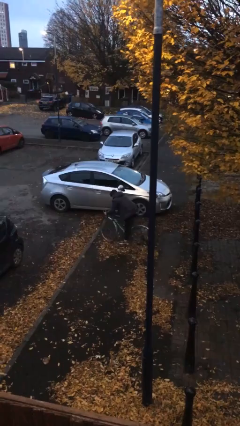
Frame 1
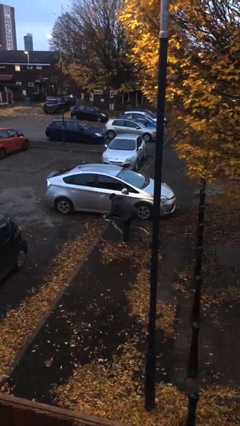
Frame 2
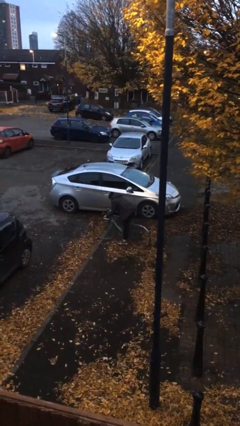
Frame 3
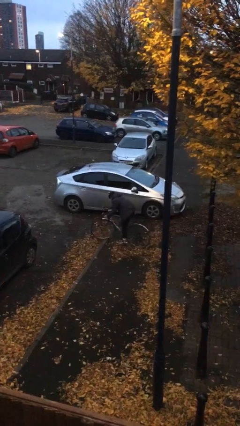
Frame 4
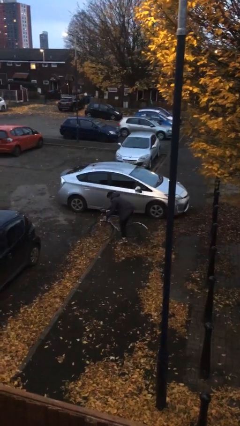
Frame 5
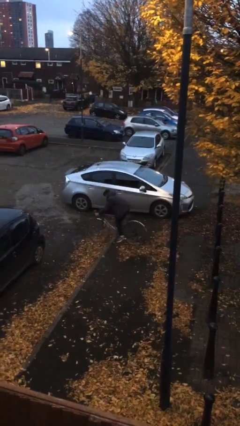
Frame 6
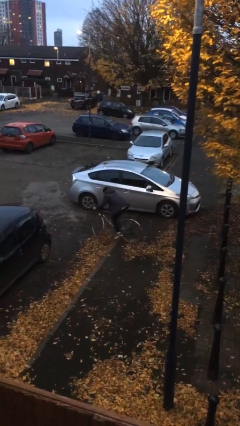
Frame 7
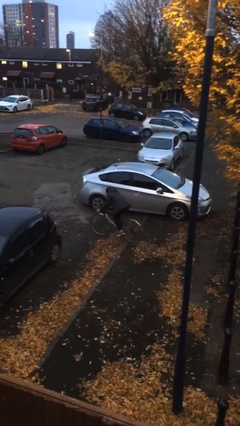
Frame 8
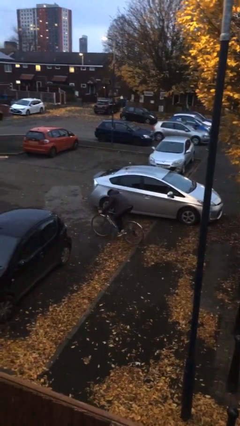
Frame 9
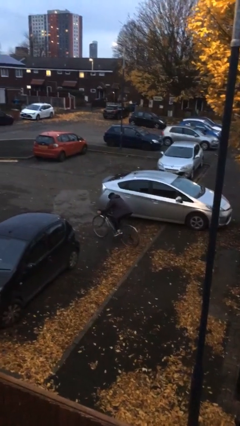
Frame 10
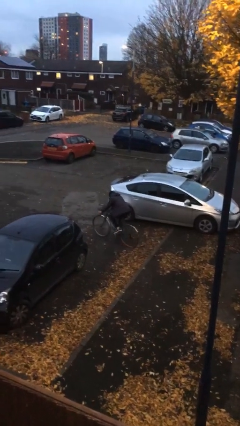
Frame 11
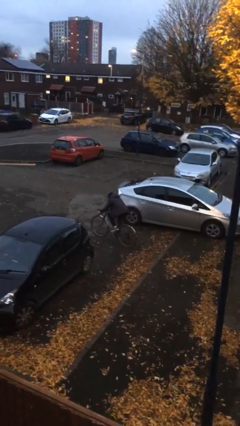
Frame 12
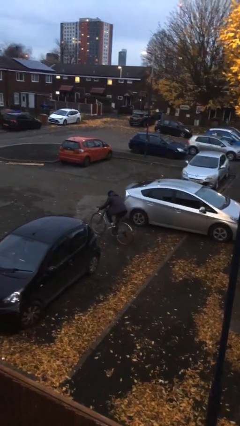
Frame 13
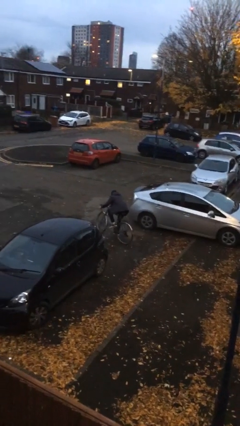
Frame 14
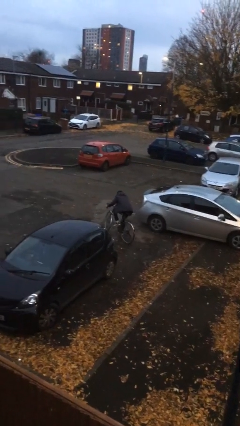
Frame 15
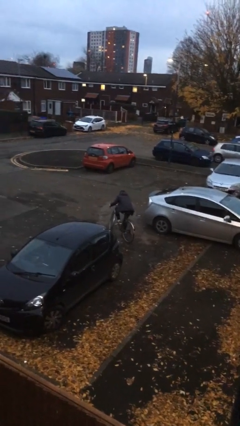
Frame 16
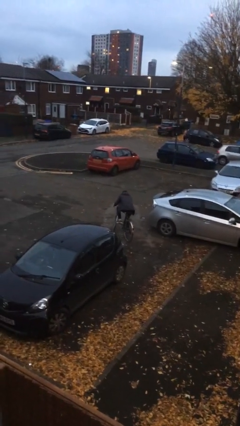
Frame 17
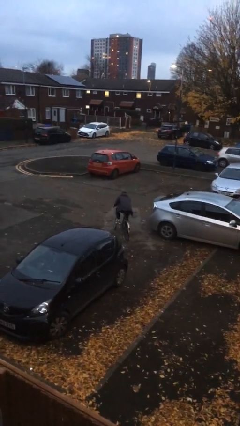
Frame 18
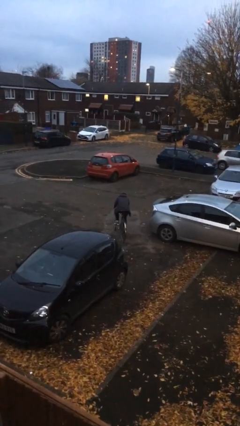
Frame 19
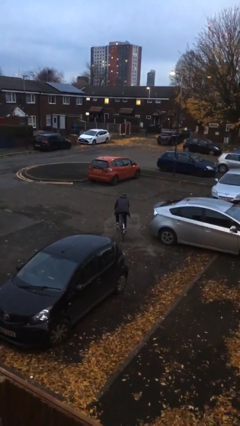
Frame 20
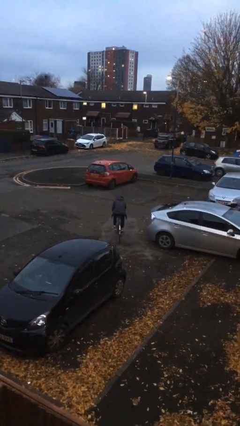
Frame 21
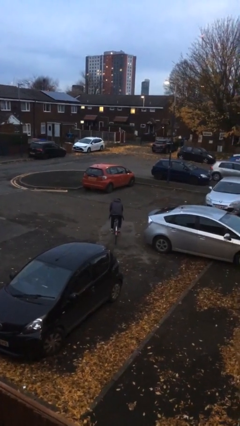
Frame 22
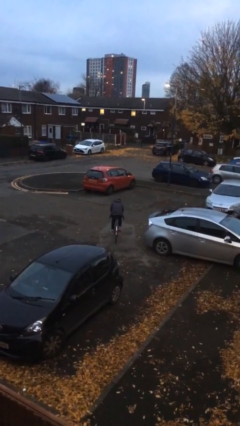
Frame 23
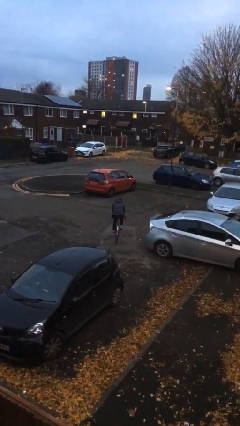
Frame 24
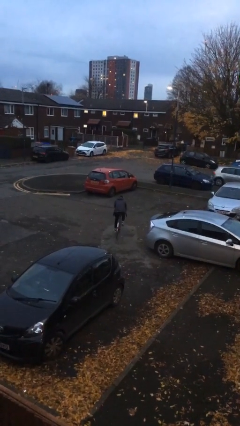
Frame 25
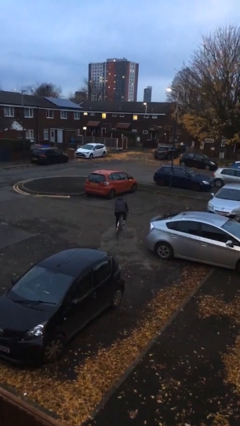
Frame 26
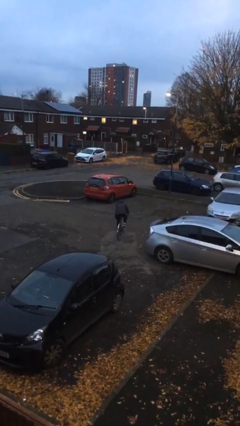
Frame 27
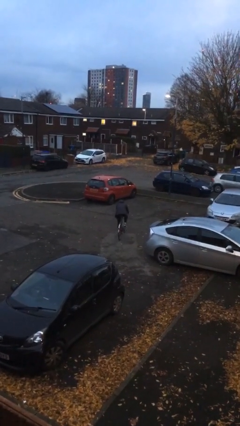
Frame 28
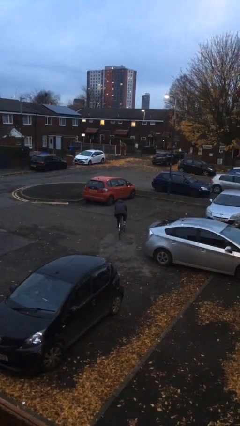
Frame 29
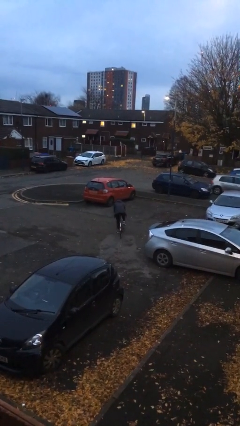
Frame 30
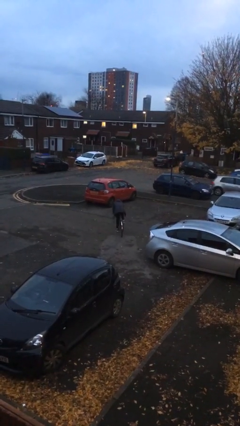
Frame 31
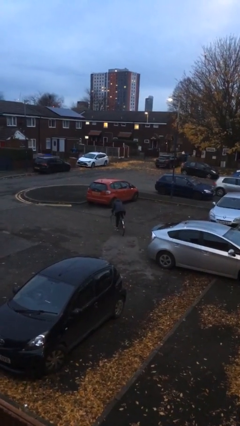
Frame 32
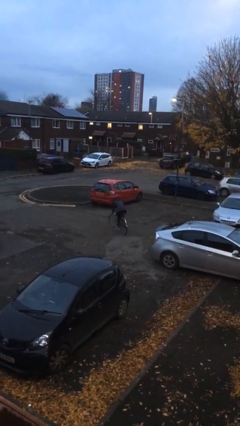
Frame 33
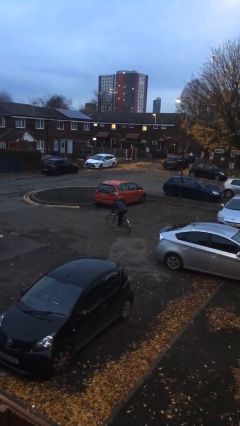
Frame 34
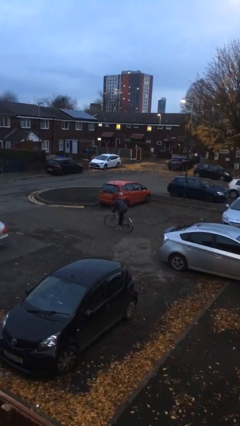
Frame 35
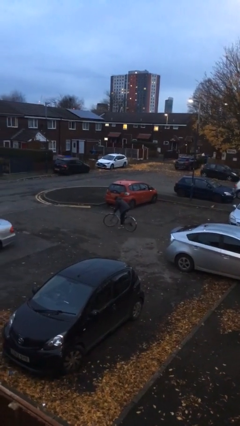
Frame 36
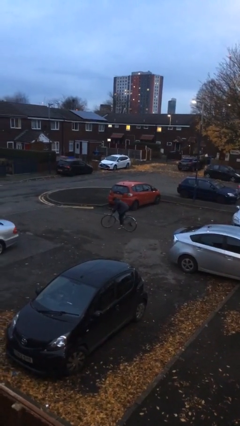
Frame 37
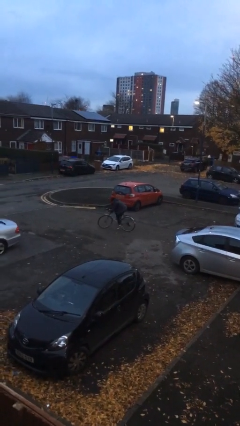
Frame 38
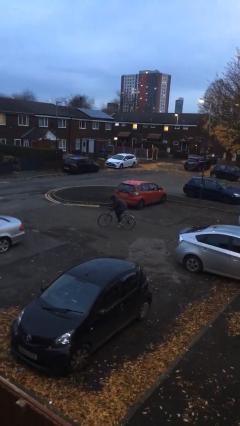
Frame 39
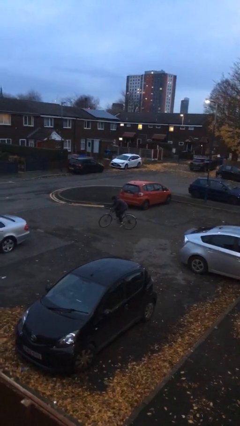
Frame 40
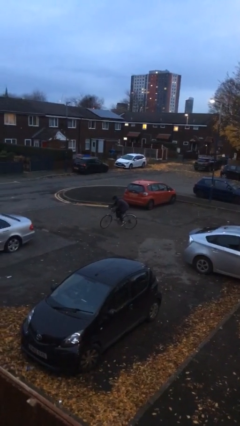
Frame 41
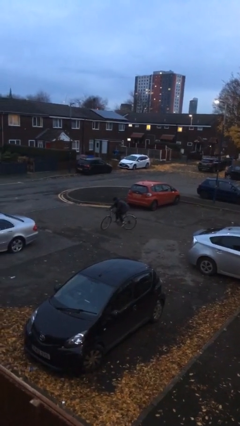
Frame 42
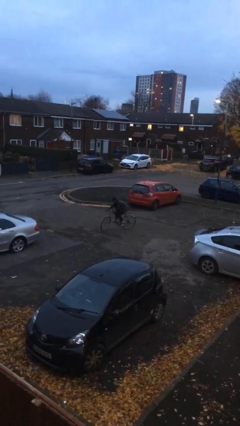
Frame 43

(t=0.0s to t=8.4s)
person rides bicycle

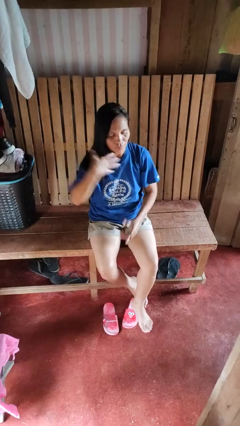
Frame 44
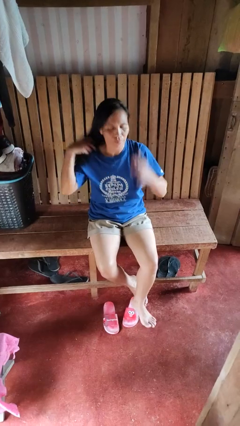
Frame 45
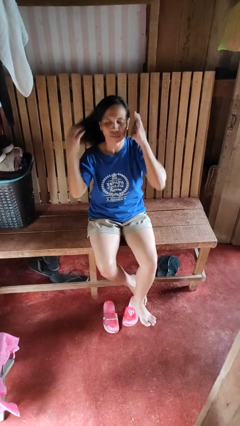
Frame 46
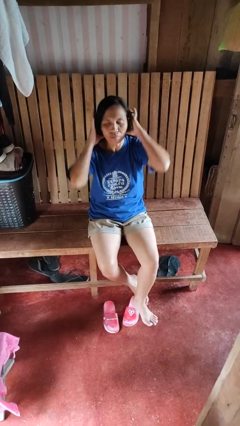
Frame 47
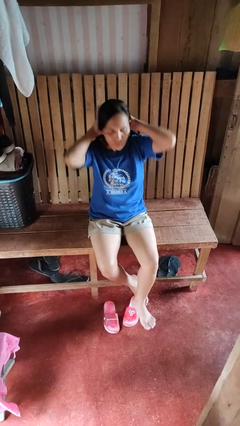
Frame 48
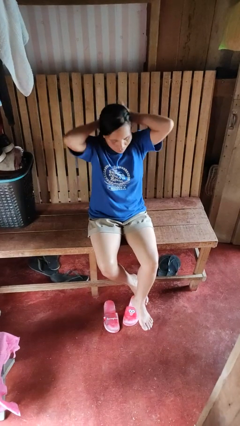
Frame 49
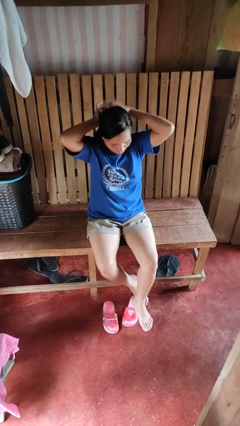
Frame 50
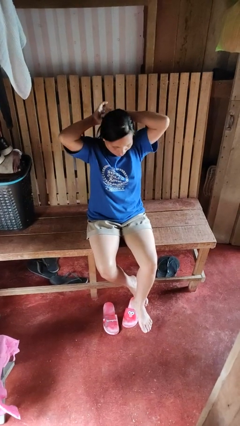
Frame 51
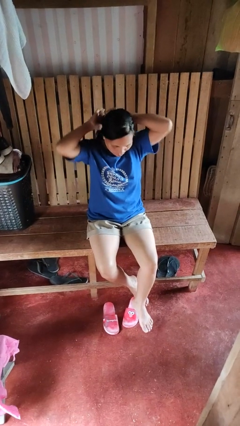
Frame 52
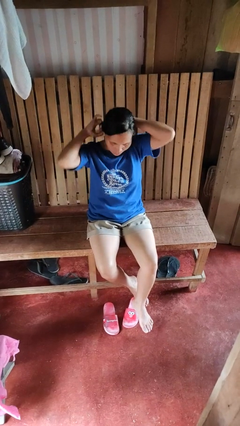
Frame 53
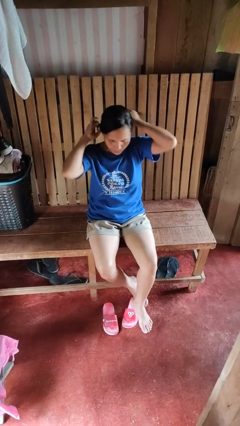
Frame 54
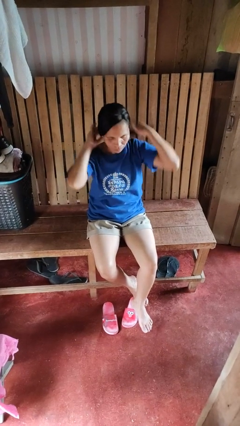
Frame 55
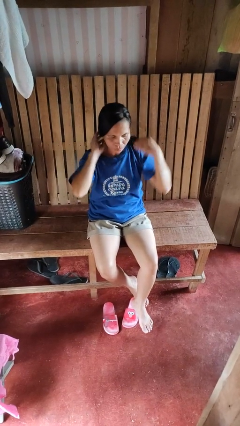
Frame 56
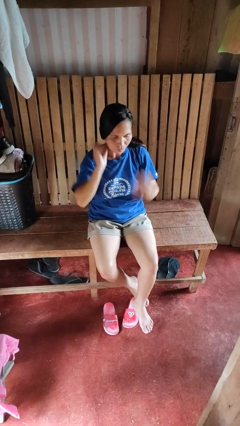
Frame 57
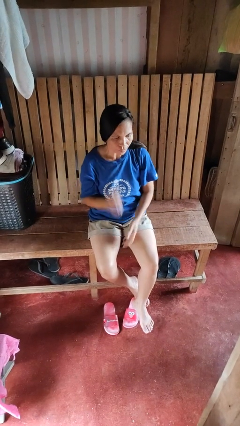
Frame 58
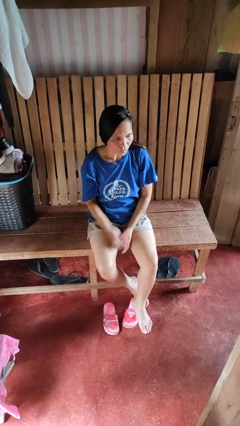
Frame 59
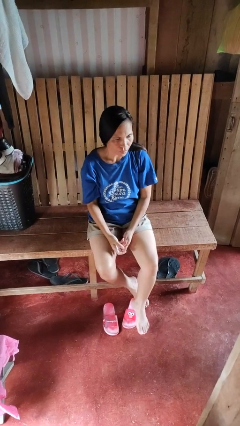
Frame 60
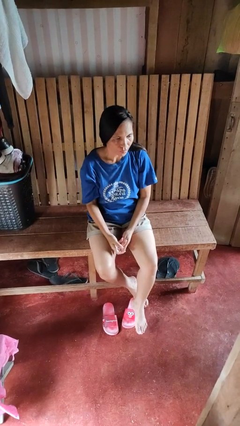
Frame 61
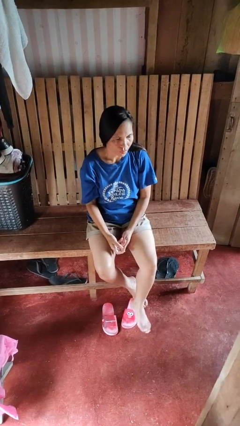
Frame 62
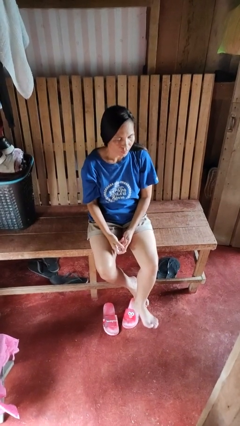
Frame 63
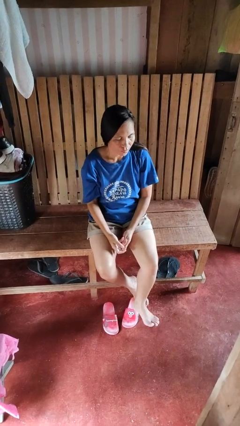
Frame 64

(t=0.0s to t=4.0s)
person puts hair in ponytail

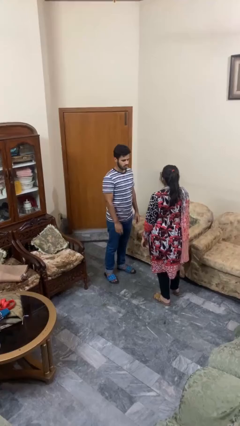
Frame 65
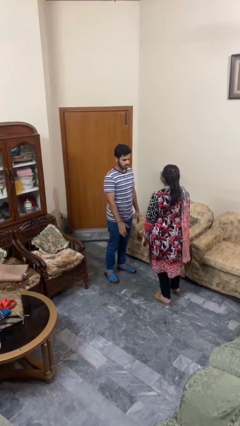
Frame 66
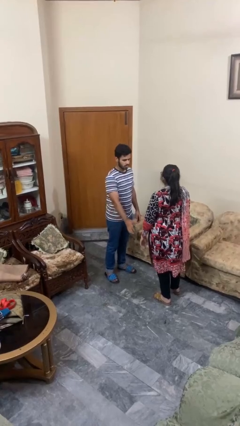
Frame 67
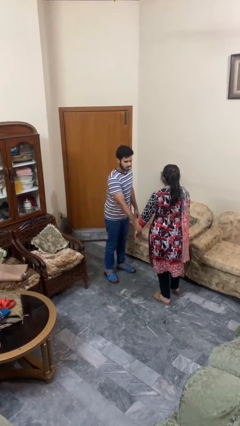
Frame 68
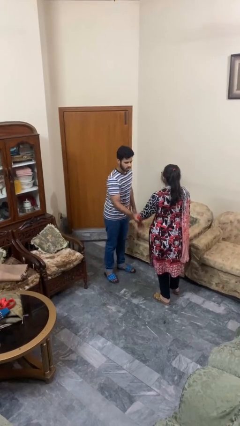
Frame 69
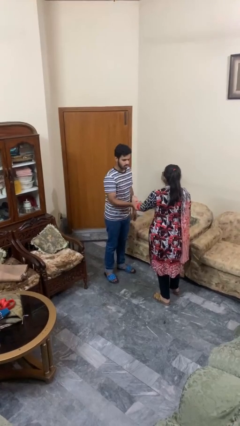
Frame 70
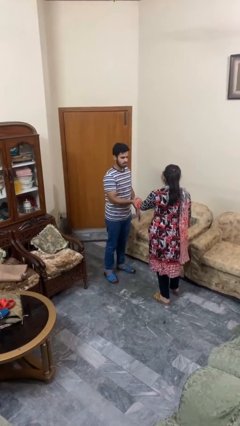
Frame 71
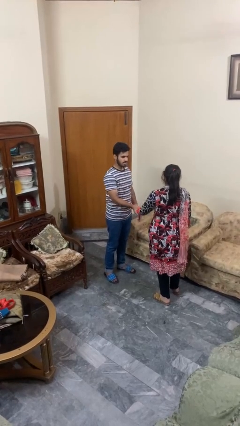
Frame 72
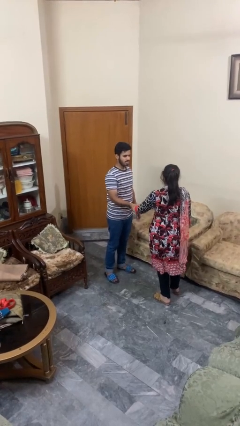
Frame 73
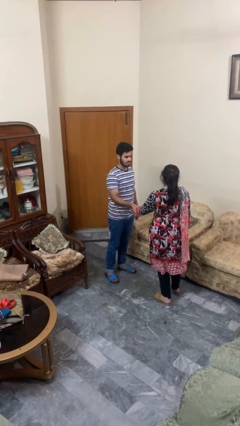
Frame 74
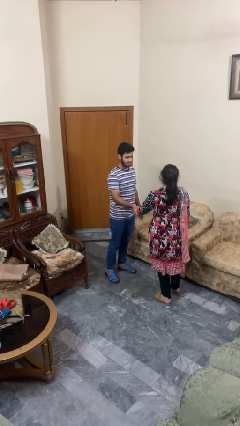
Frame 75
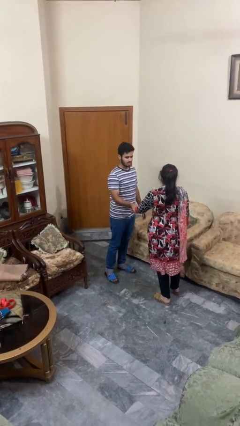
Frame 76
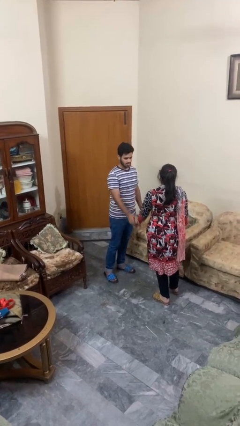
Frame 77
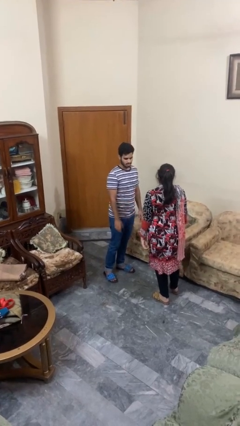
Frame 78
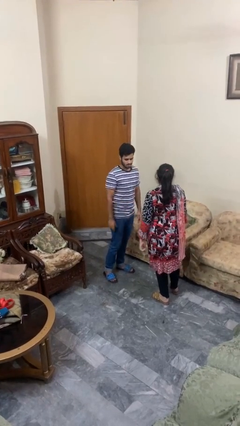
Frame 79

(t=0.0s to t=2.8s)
person grabs person by forearm

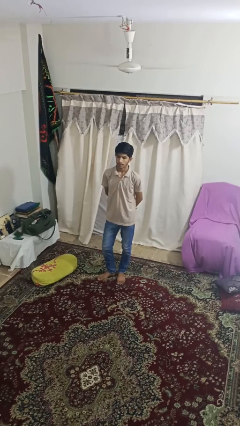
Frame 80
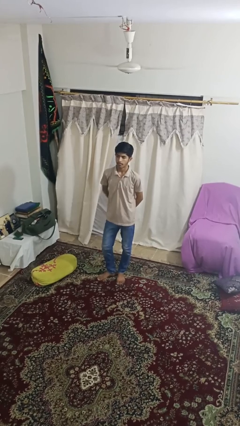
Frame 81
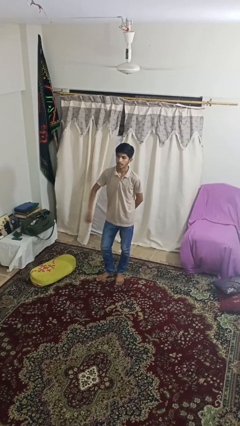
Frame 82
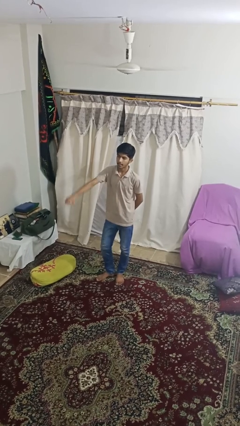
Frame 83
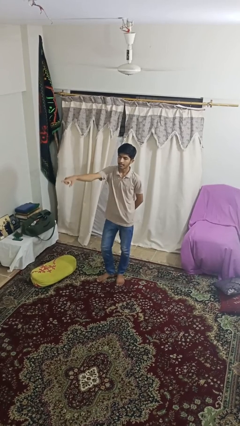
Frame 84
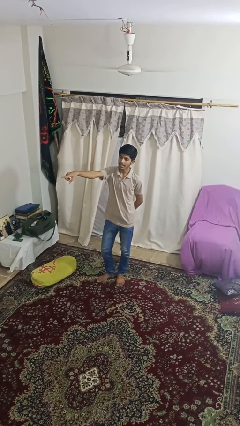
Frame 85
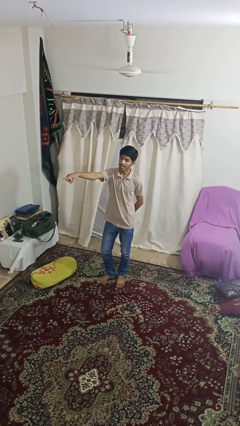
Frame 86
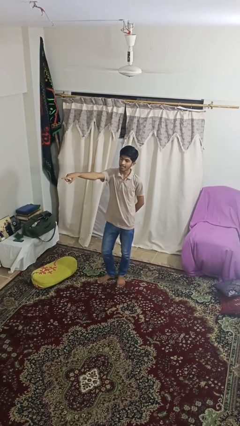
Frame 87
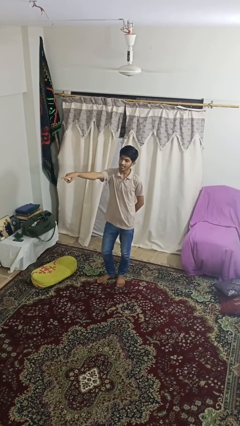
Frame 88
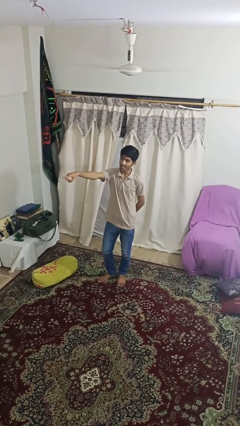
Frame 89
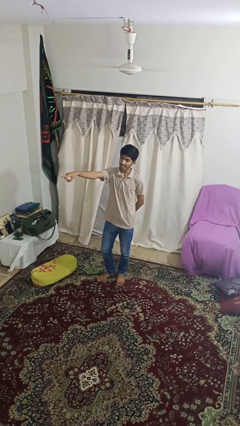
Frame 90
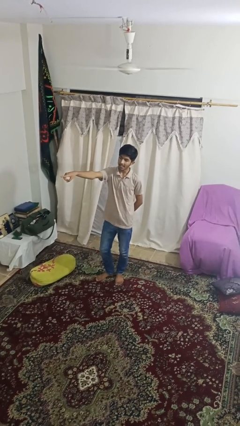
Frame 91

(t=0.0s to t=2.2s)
person points at person

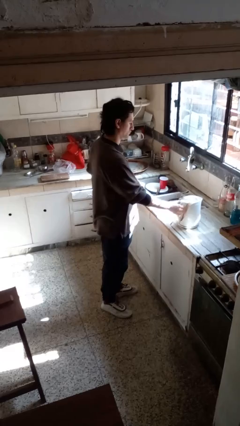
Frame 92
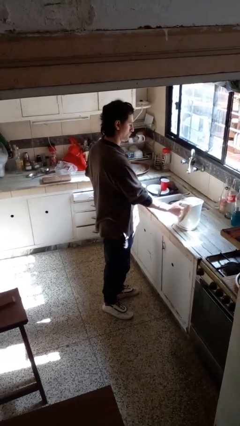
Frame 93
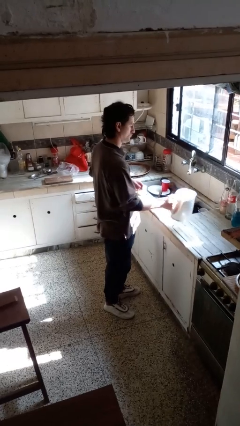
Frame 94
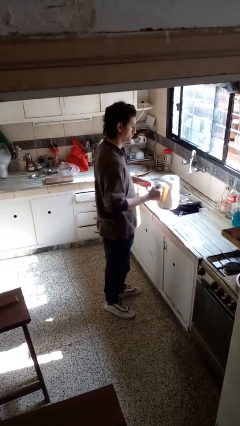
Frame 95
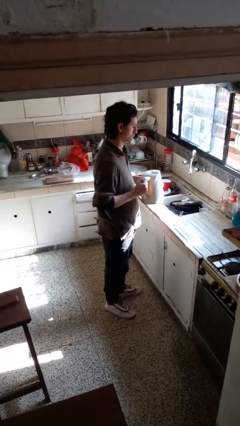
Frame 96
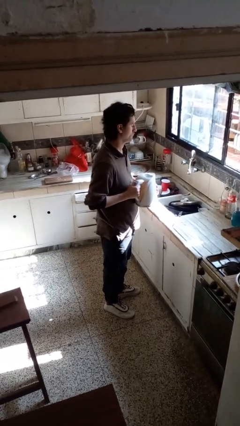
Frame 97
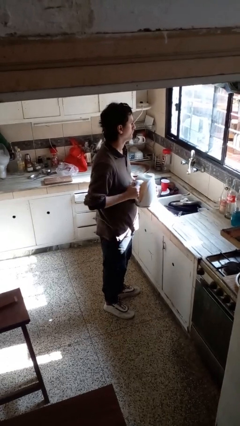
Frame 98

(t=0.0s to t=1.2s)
person picks up object from countertop
